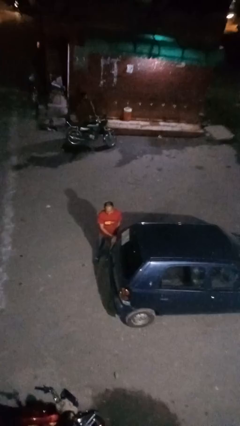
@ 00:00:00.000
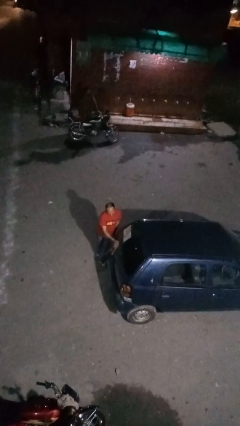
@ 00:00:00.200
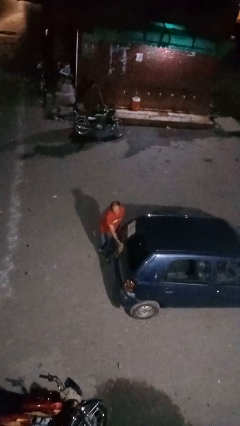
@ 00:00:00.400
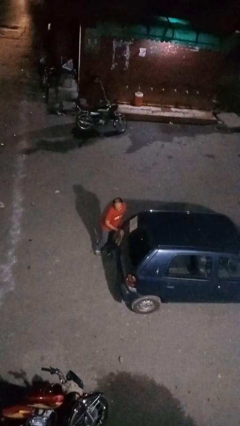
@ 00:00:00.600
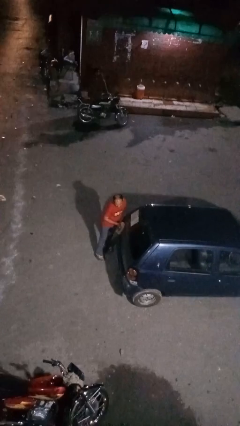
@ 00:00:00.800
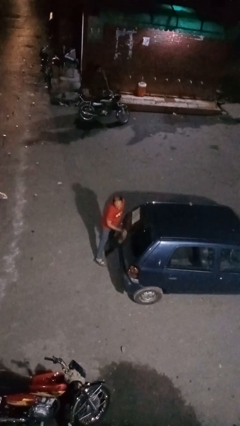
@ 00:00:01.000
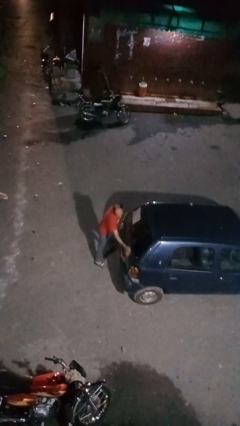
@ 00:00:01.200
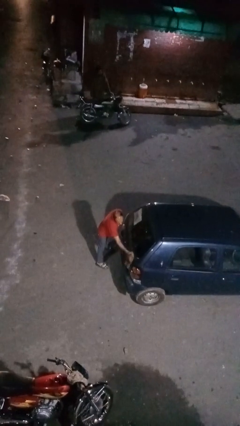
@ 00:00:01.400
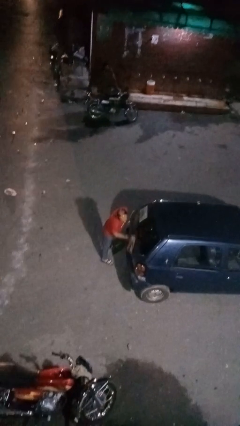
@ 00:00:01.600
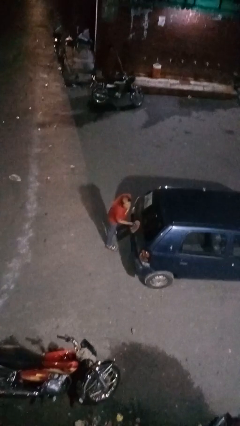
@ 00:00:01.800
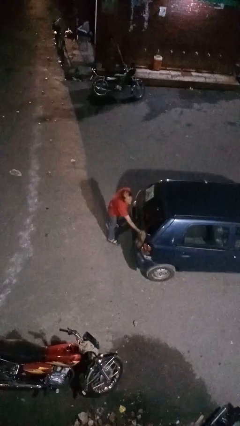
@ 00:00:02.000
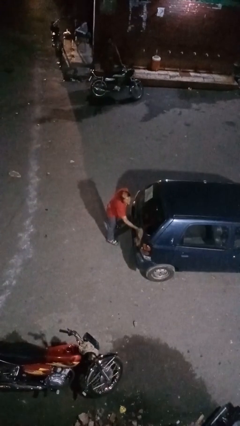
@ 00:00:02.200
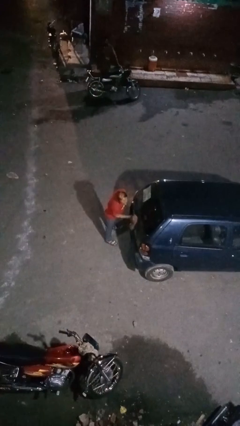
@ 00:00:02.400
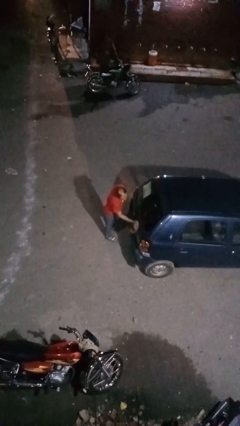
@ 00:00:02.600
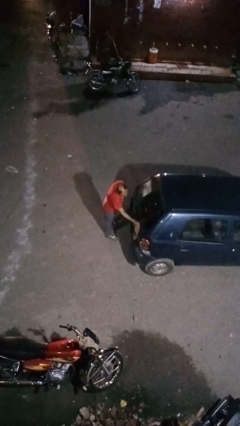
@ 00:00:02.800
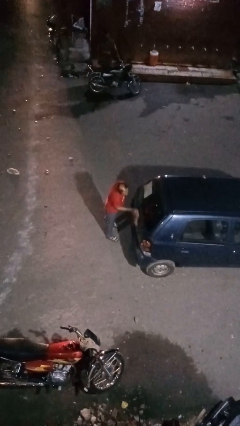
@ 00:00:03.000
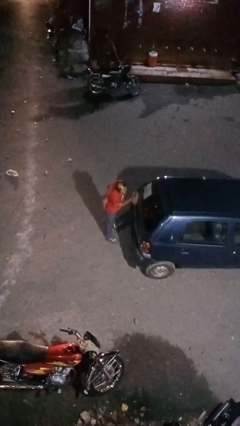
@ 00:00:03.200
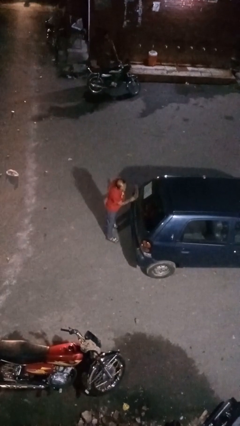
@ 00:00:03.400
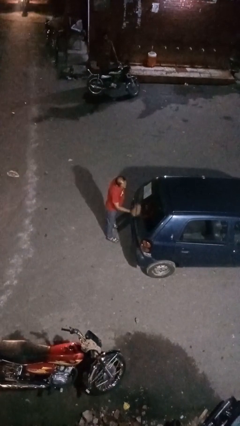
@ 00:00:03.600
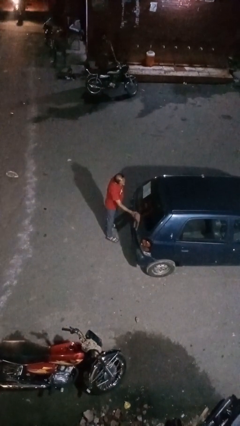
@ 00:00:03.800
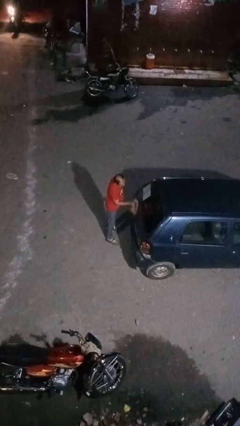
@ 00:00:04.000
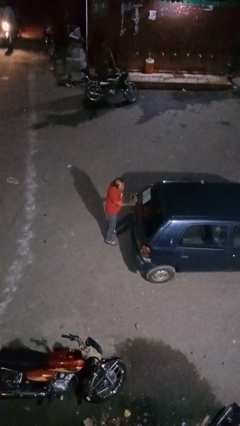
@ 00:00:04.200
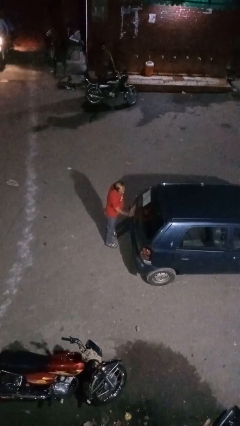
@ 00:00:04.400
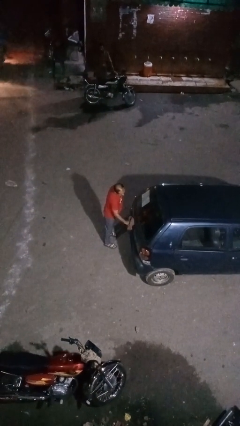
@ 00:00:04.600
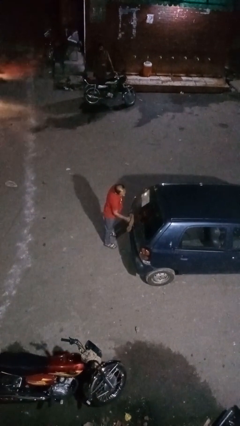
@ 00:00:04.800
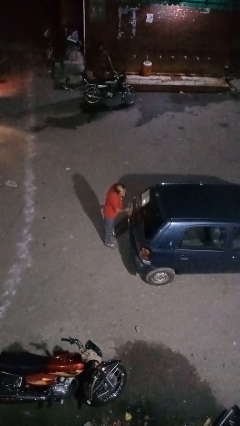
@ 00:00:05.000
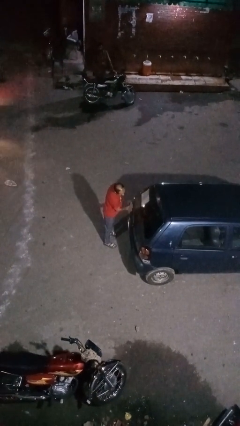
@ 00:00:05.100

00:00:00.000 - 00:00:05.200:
person polishes car with rag

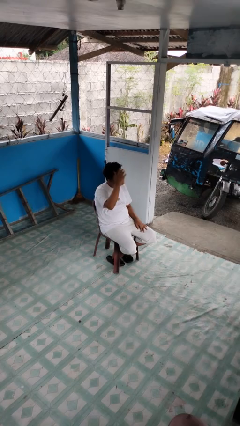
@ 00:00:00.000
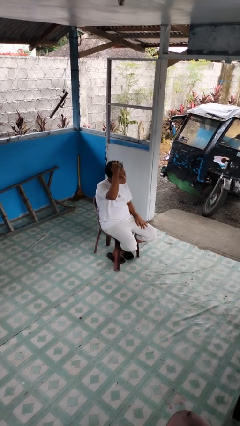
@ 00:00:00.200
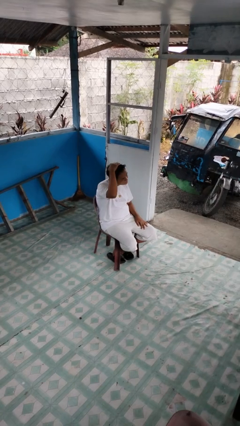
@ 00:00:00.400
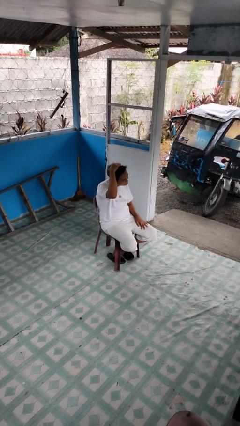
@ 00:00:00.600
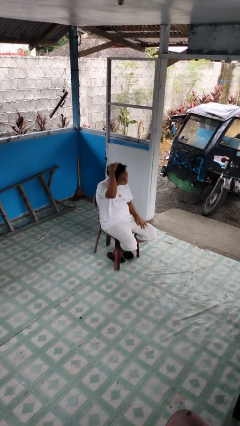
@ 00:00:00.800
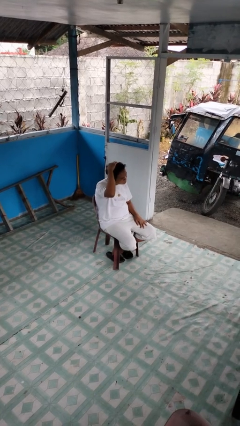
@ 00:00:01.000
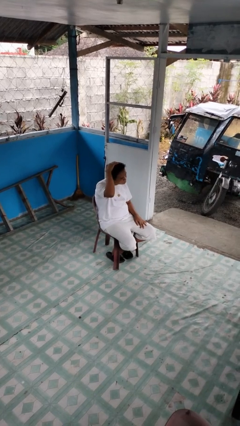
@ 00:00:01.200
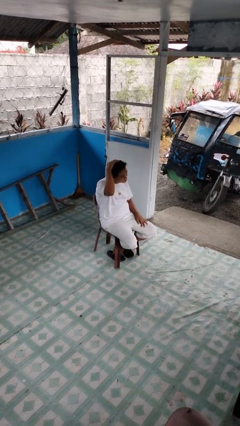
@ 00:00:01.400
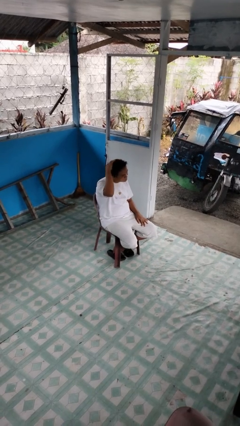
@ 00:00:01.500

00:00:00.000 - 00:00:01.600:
person pats head

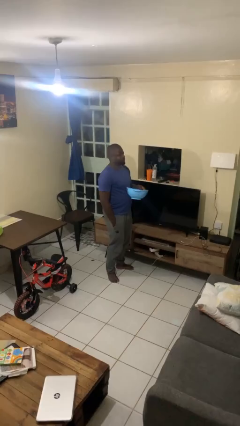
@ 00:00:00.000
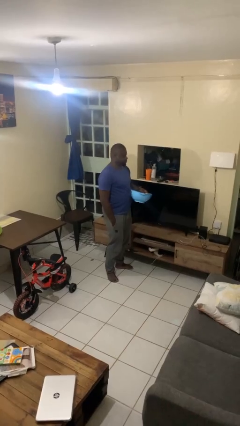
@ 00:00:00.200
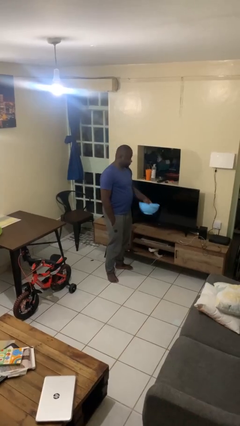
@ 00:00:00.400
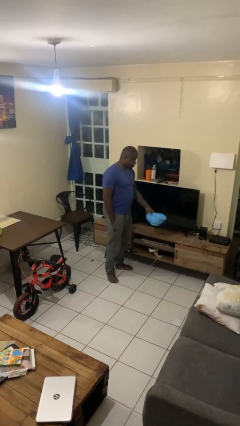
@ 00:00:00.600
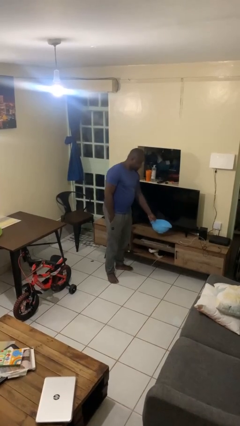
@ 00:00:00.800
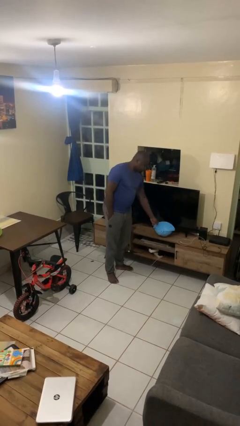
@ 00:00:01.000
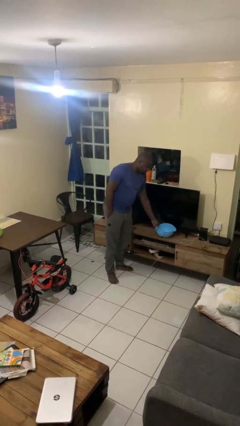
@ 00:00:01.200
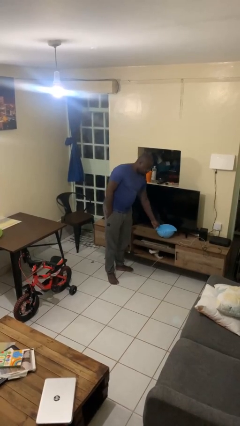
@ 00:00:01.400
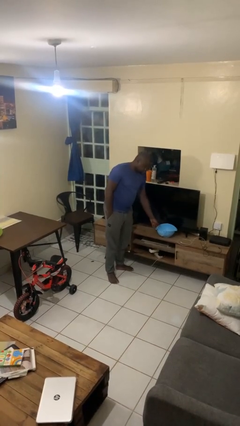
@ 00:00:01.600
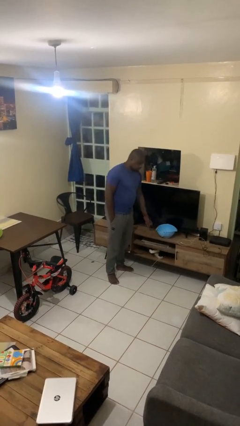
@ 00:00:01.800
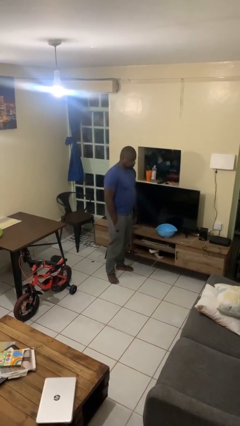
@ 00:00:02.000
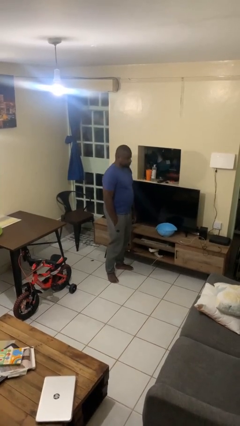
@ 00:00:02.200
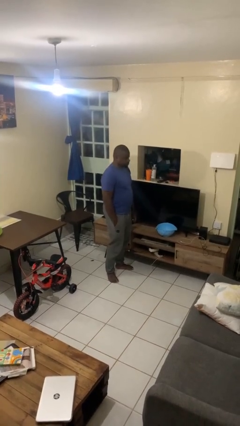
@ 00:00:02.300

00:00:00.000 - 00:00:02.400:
person puts down object on countertop

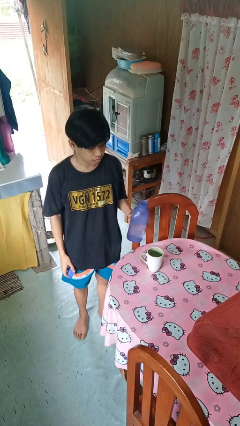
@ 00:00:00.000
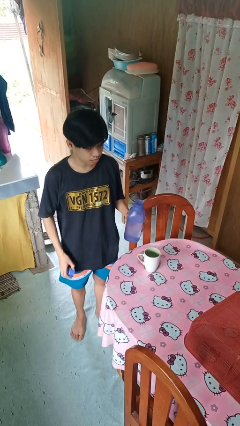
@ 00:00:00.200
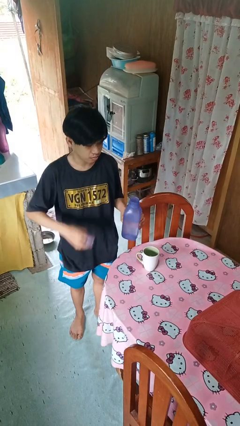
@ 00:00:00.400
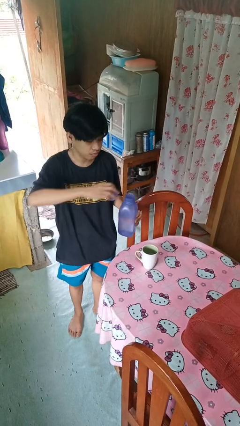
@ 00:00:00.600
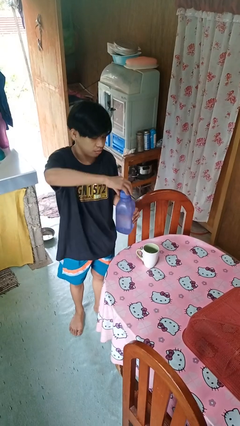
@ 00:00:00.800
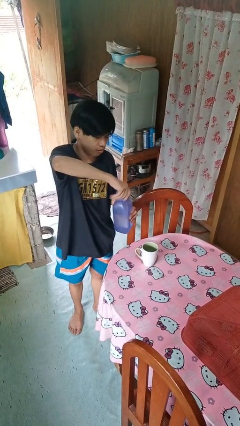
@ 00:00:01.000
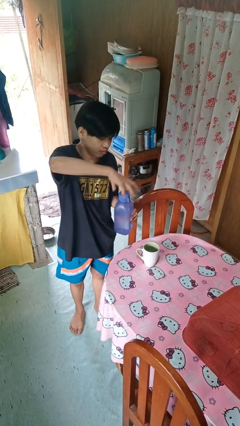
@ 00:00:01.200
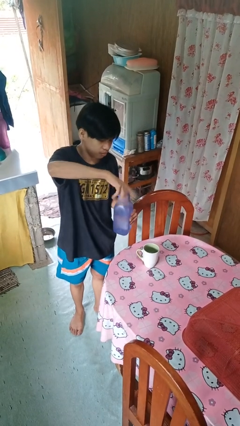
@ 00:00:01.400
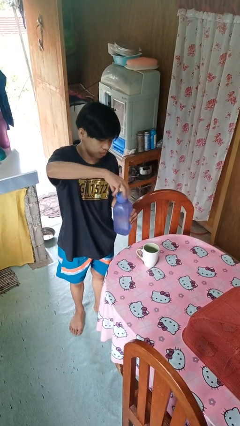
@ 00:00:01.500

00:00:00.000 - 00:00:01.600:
person screws lid to bottle

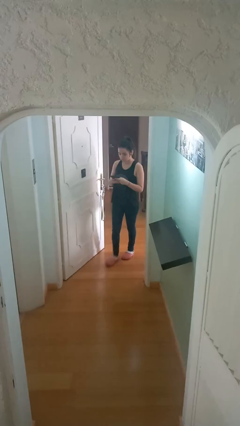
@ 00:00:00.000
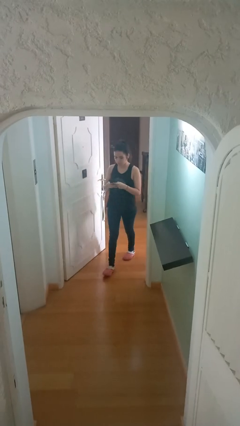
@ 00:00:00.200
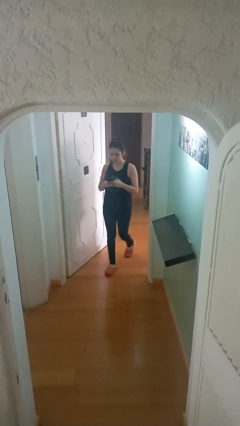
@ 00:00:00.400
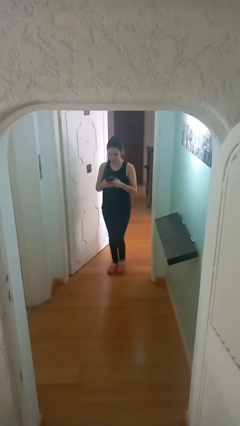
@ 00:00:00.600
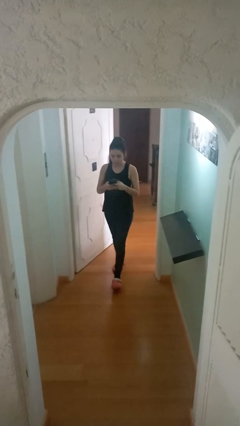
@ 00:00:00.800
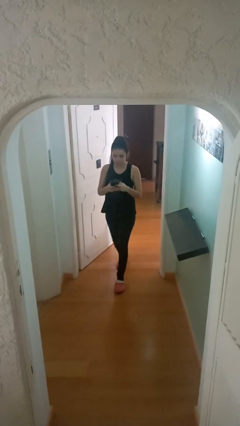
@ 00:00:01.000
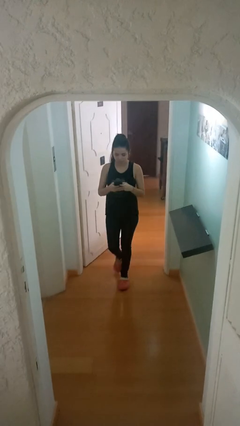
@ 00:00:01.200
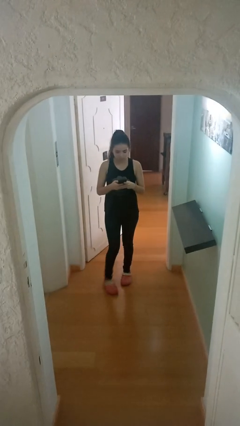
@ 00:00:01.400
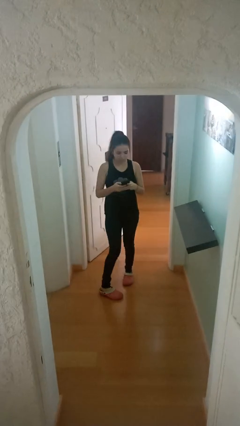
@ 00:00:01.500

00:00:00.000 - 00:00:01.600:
person enters scene through structure

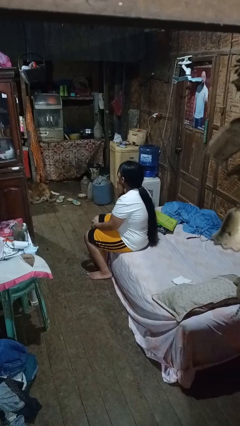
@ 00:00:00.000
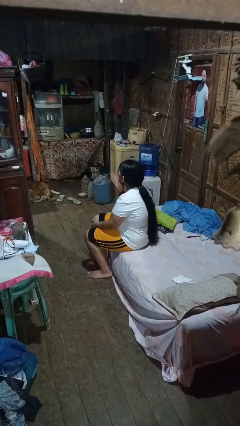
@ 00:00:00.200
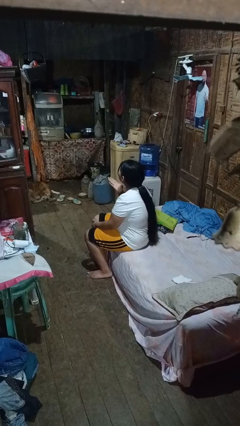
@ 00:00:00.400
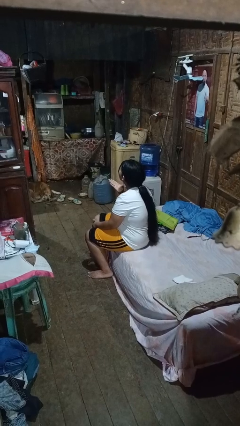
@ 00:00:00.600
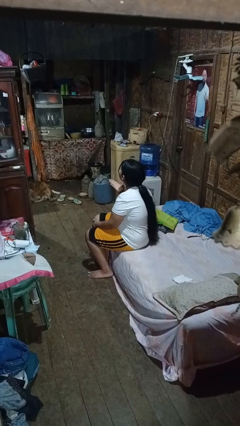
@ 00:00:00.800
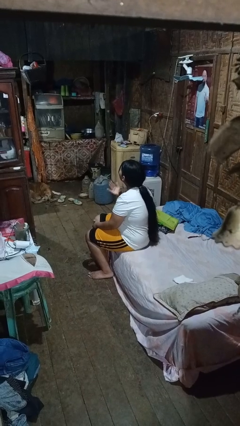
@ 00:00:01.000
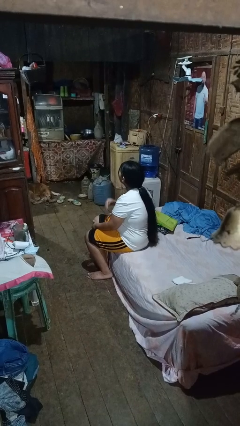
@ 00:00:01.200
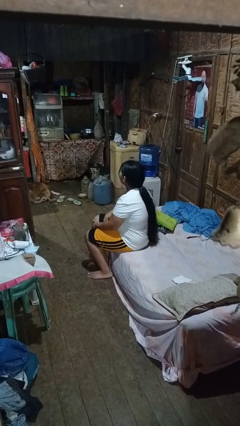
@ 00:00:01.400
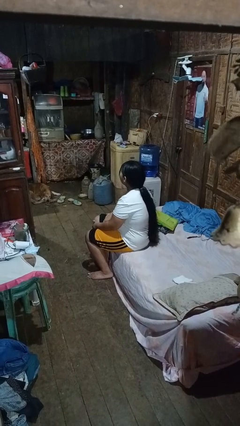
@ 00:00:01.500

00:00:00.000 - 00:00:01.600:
person gestures blow kiss

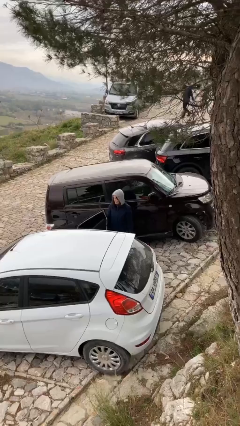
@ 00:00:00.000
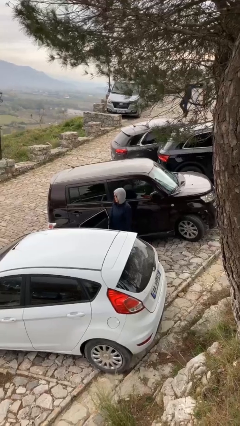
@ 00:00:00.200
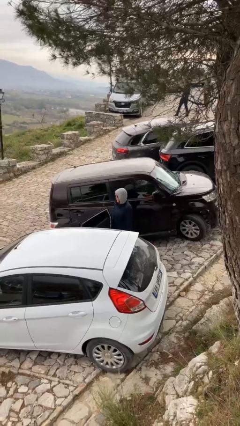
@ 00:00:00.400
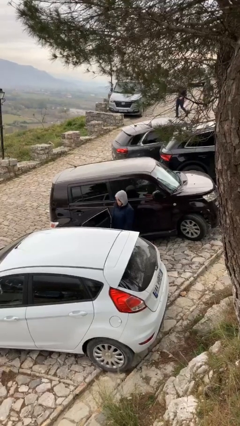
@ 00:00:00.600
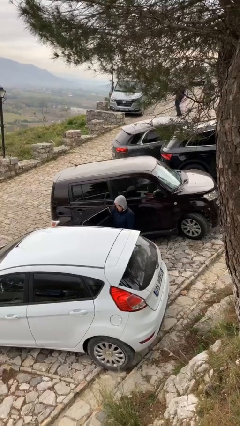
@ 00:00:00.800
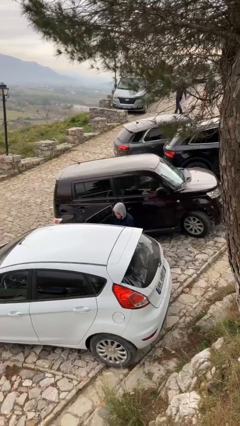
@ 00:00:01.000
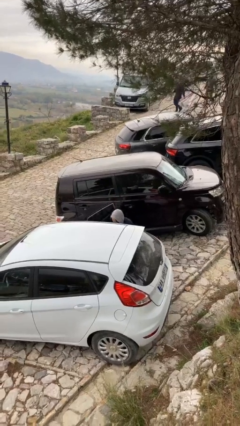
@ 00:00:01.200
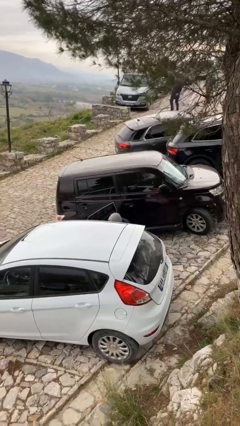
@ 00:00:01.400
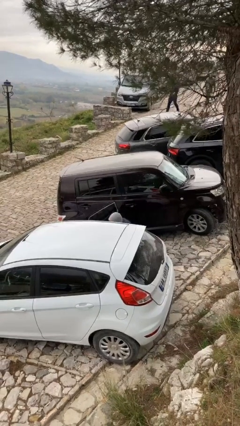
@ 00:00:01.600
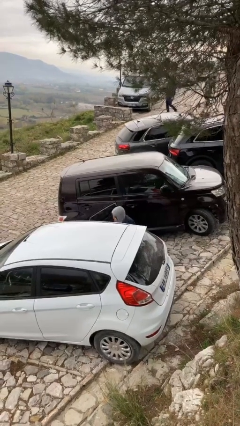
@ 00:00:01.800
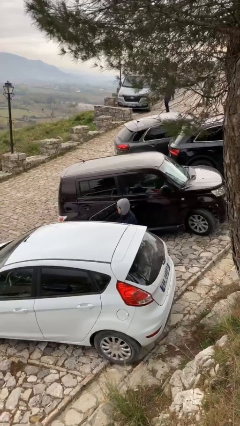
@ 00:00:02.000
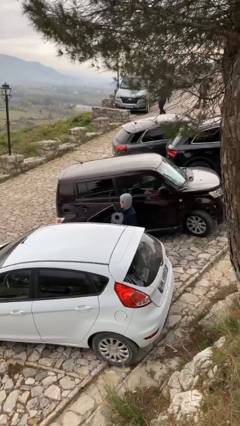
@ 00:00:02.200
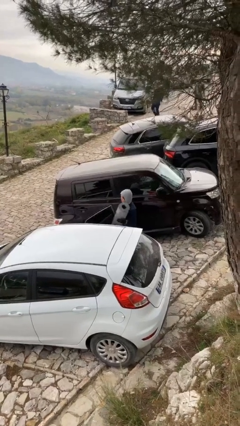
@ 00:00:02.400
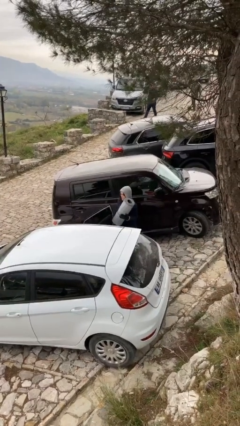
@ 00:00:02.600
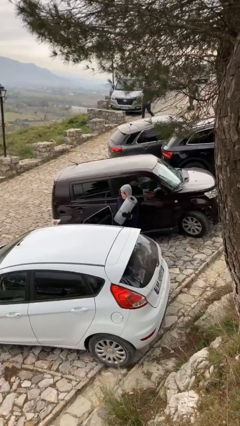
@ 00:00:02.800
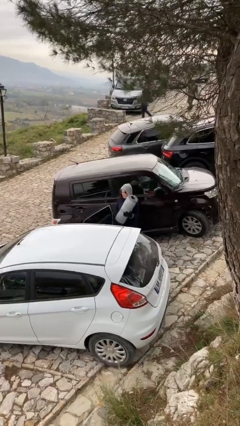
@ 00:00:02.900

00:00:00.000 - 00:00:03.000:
person unloads car
